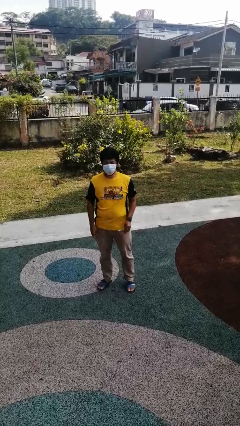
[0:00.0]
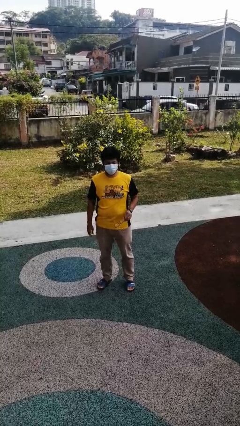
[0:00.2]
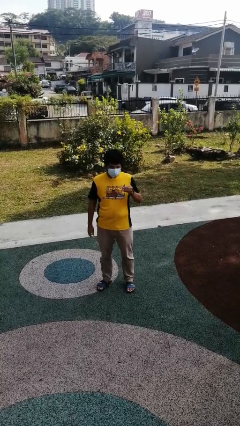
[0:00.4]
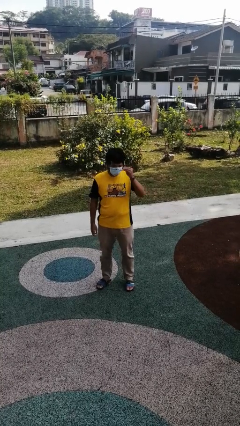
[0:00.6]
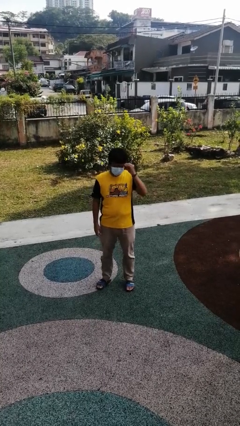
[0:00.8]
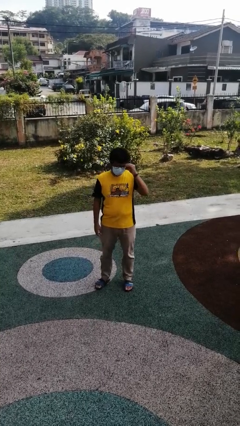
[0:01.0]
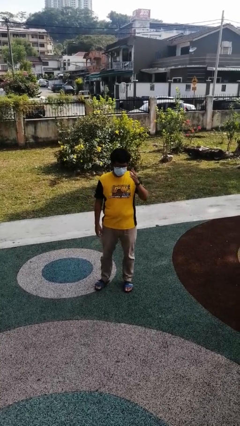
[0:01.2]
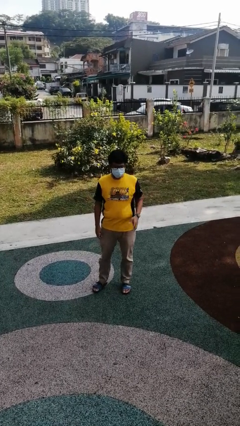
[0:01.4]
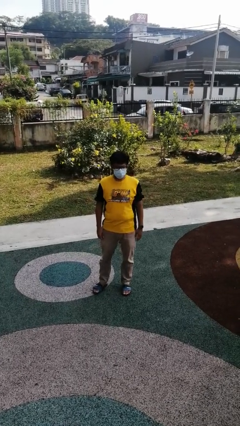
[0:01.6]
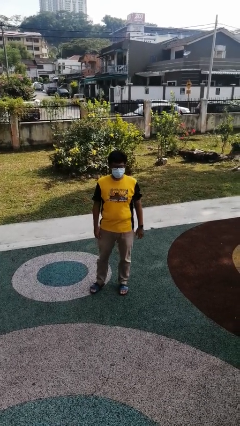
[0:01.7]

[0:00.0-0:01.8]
person puts on glasses

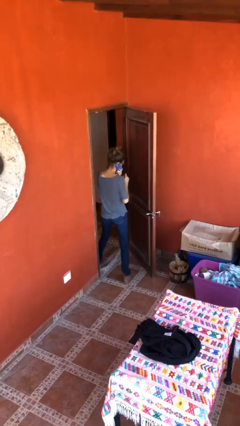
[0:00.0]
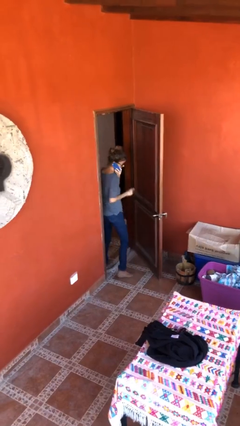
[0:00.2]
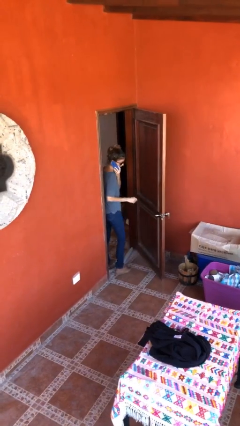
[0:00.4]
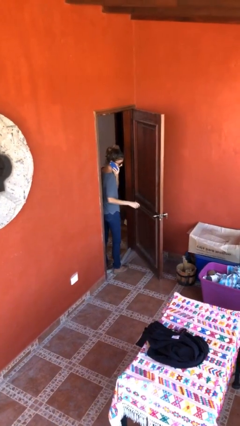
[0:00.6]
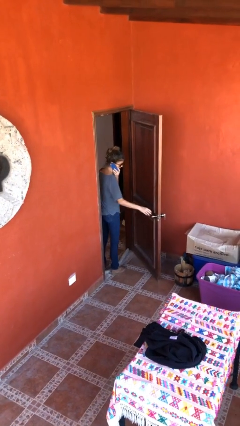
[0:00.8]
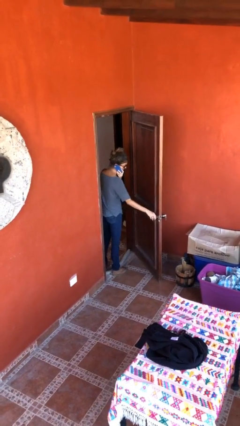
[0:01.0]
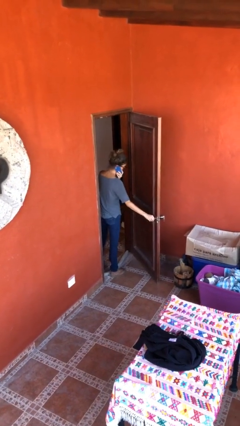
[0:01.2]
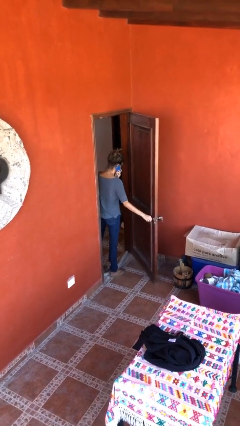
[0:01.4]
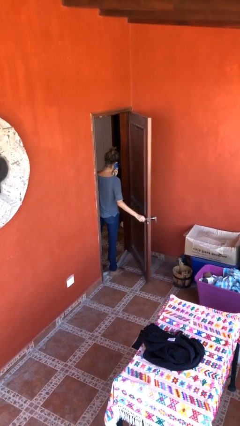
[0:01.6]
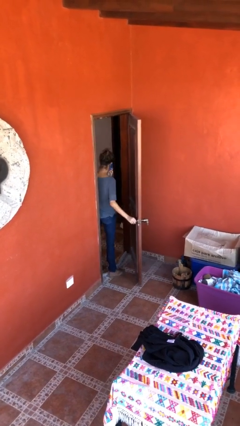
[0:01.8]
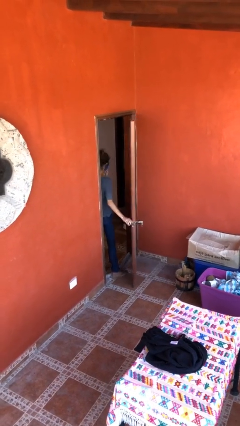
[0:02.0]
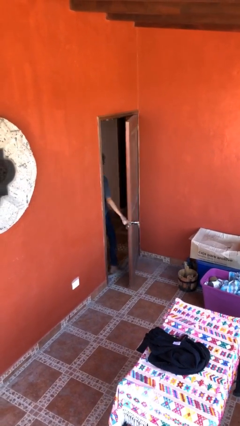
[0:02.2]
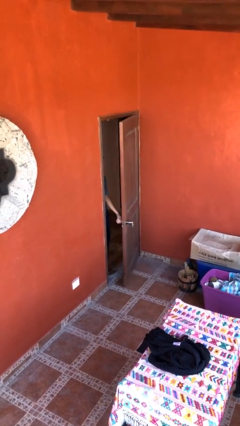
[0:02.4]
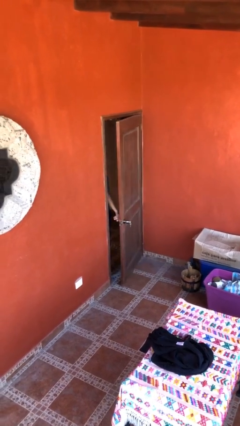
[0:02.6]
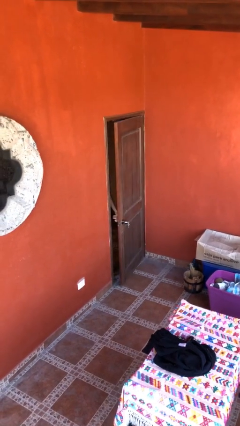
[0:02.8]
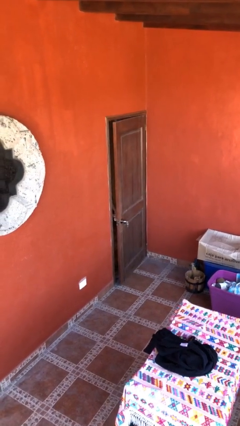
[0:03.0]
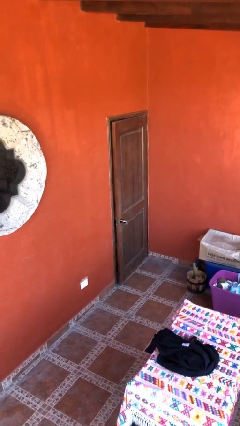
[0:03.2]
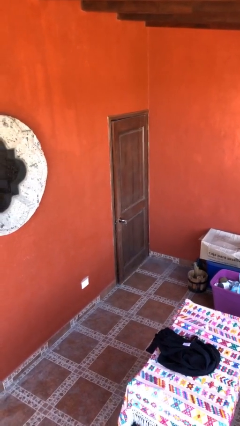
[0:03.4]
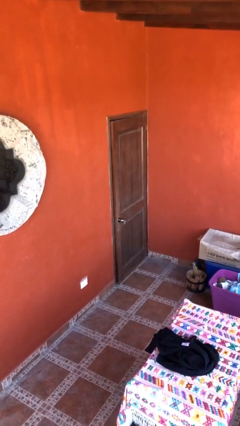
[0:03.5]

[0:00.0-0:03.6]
person closes facility door

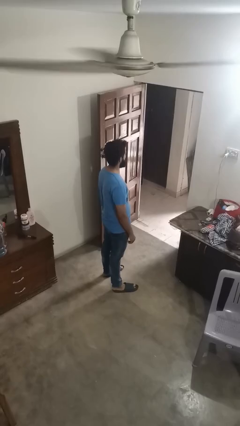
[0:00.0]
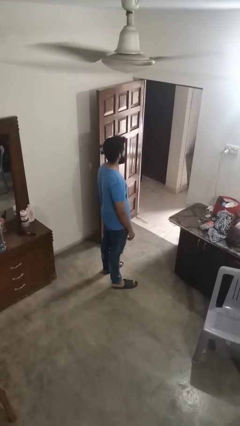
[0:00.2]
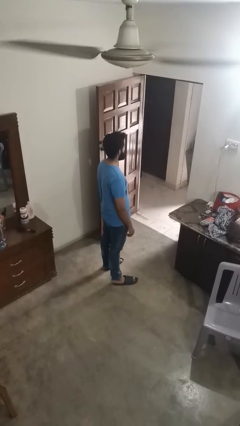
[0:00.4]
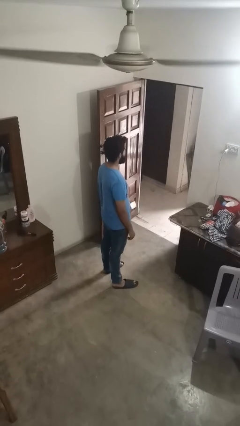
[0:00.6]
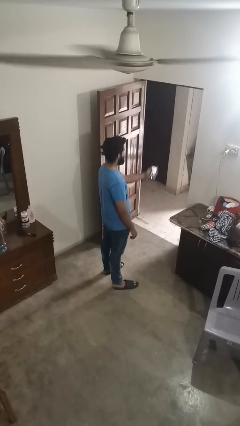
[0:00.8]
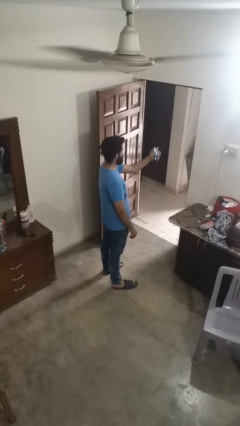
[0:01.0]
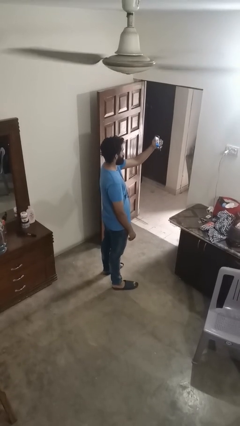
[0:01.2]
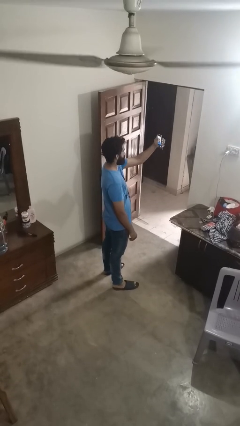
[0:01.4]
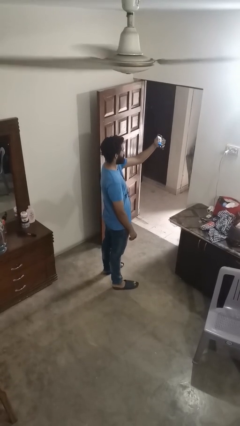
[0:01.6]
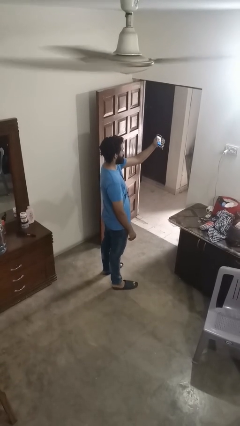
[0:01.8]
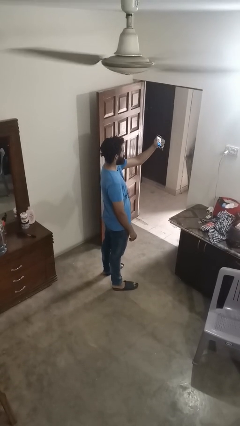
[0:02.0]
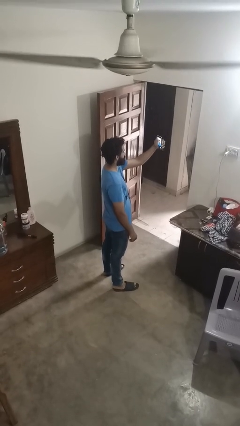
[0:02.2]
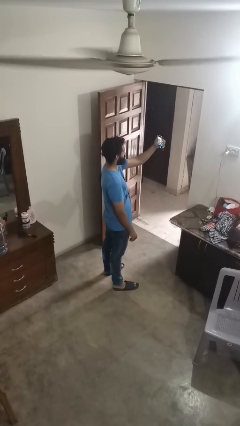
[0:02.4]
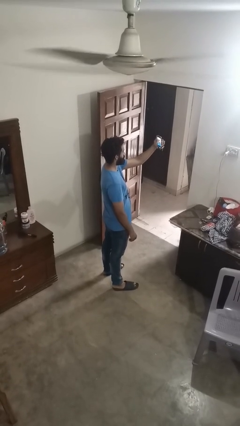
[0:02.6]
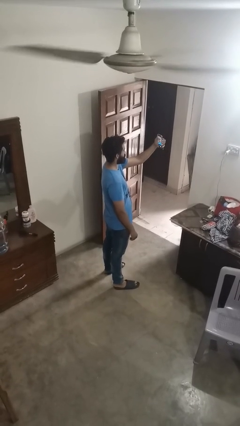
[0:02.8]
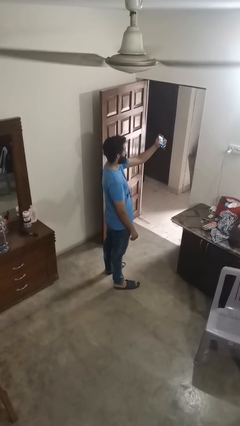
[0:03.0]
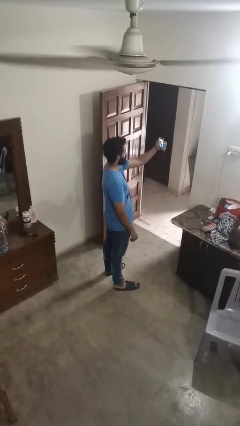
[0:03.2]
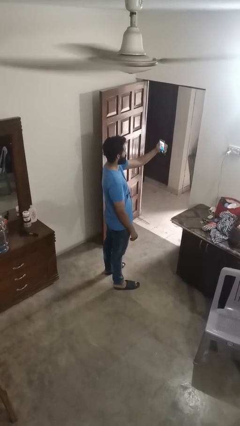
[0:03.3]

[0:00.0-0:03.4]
person takes selfie

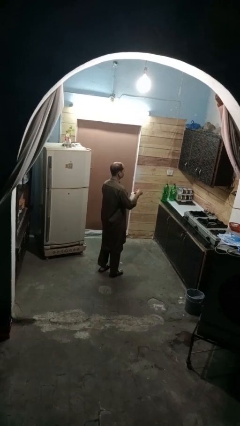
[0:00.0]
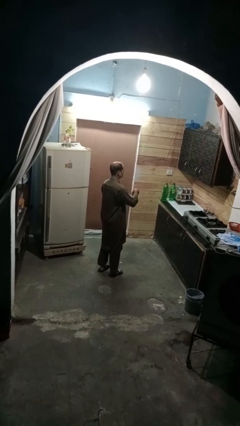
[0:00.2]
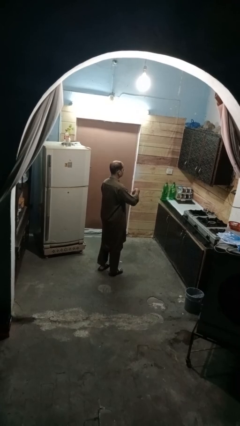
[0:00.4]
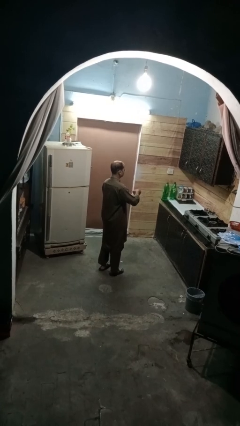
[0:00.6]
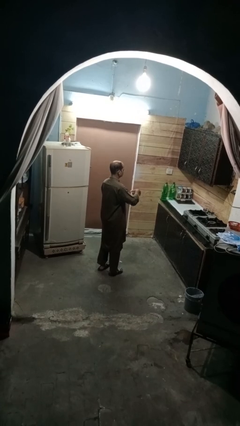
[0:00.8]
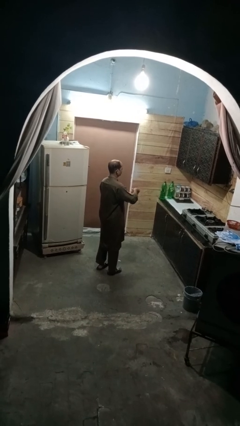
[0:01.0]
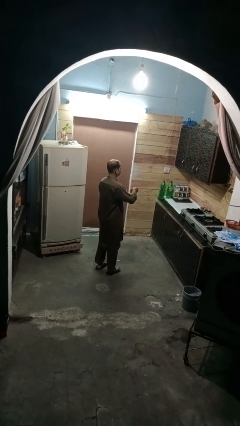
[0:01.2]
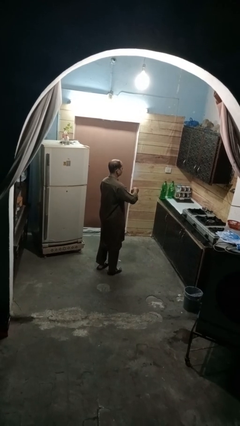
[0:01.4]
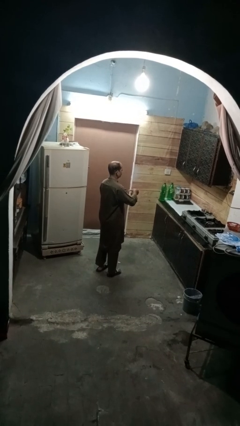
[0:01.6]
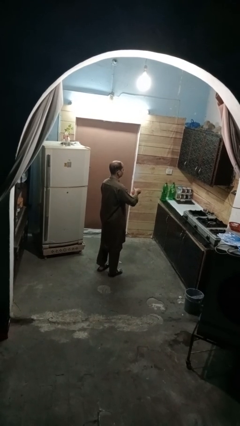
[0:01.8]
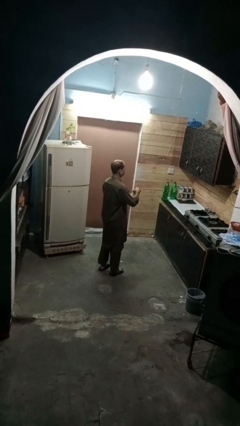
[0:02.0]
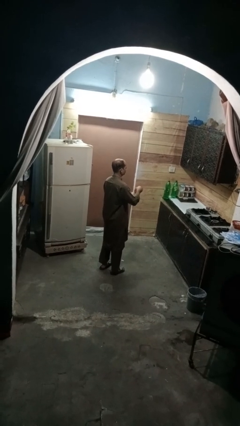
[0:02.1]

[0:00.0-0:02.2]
person closes jar

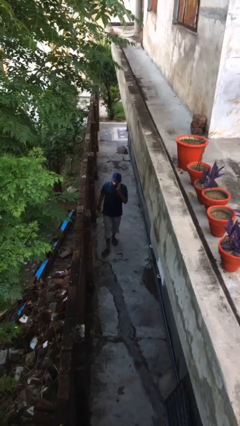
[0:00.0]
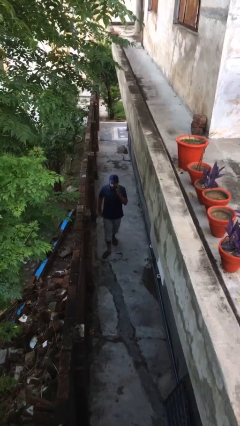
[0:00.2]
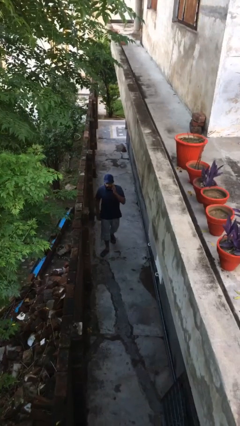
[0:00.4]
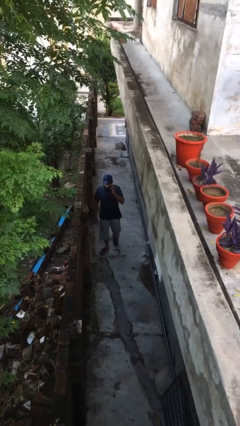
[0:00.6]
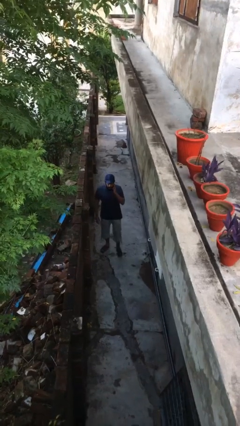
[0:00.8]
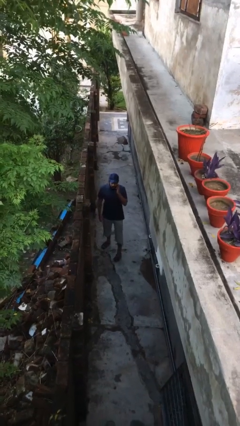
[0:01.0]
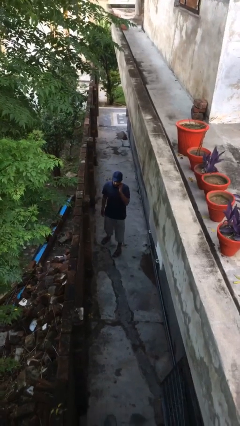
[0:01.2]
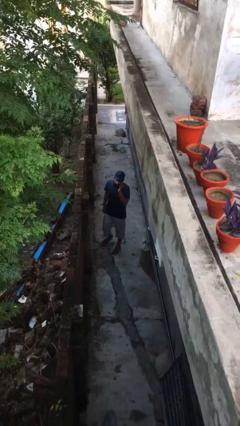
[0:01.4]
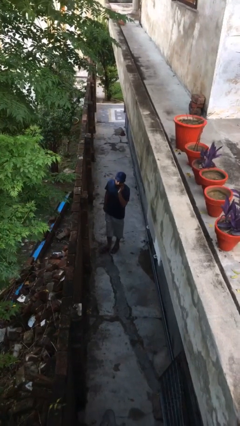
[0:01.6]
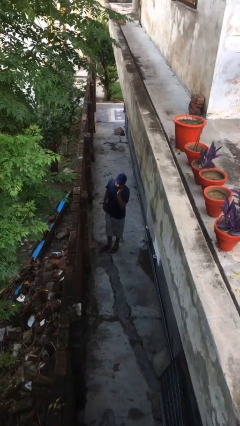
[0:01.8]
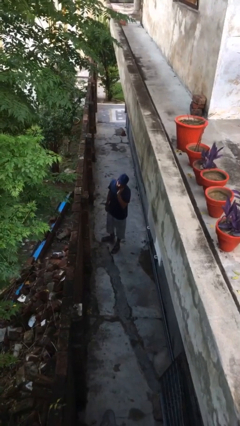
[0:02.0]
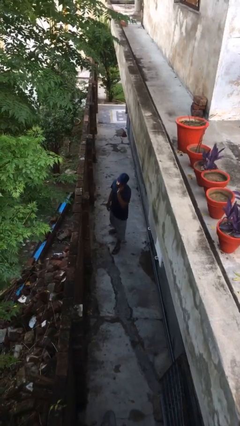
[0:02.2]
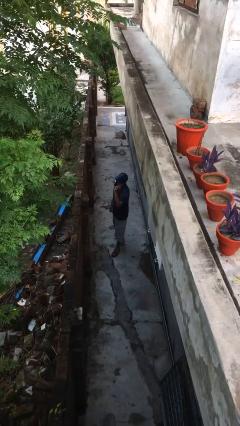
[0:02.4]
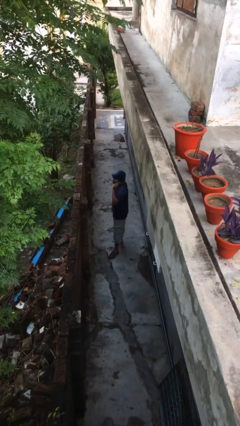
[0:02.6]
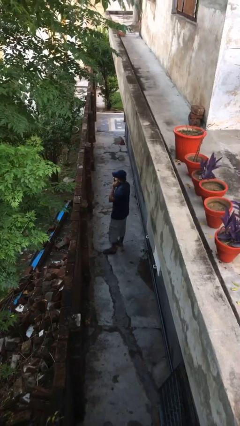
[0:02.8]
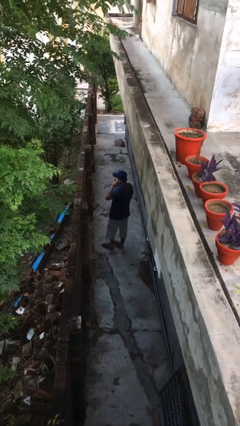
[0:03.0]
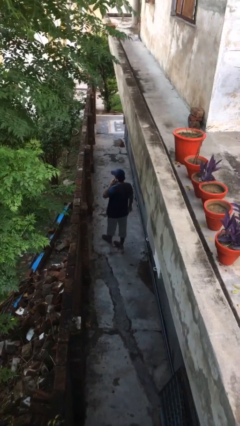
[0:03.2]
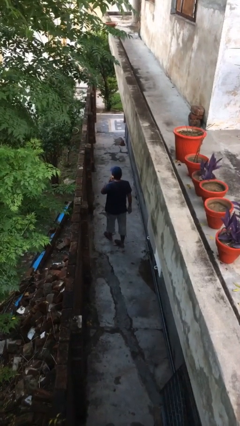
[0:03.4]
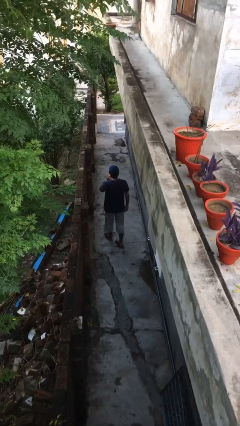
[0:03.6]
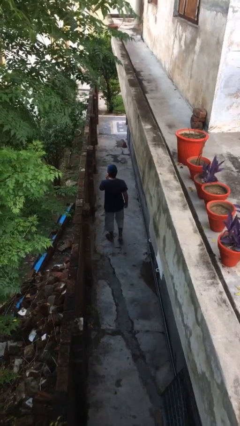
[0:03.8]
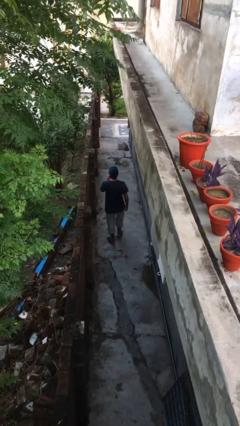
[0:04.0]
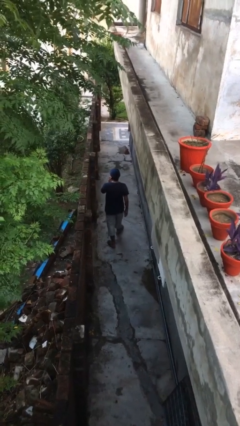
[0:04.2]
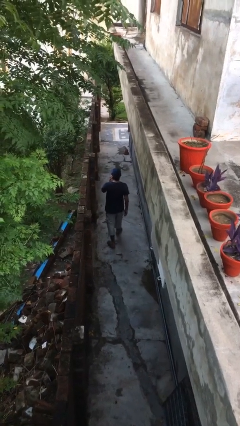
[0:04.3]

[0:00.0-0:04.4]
person talks on phone

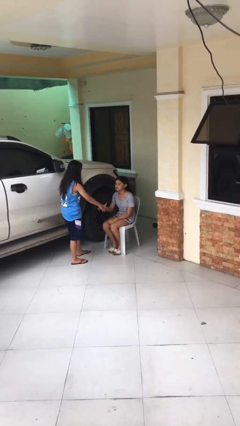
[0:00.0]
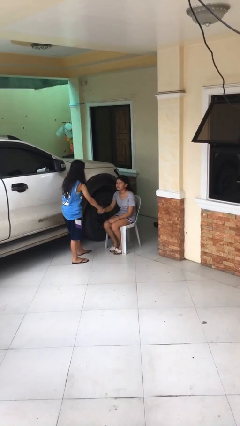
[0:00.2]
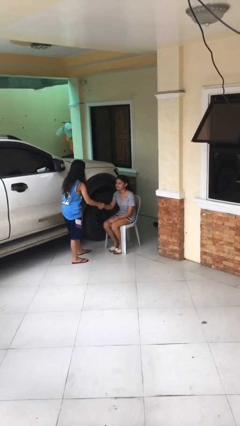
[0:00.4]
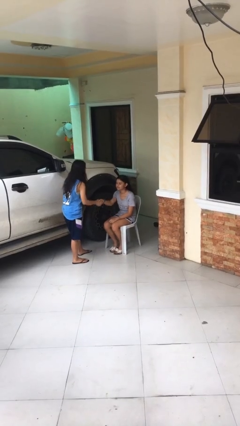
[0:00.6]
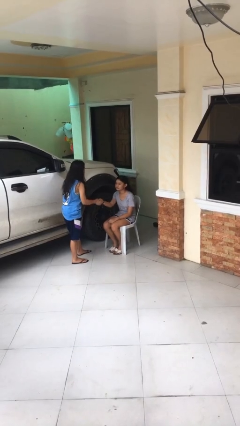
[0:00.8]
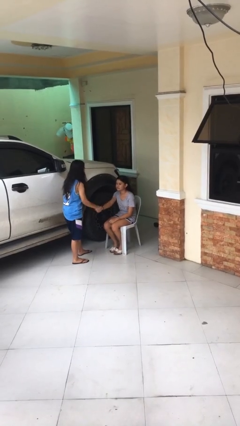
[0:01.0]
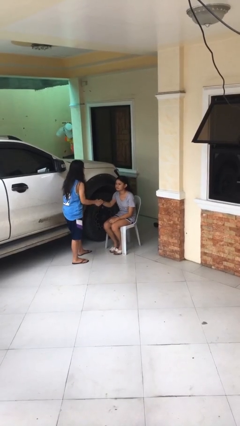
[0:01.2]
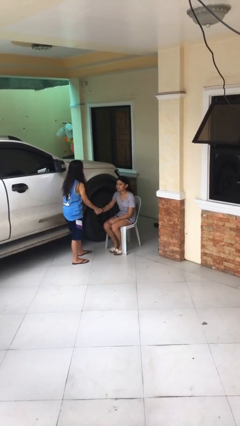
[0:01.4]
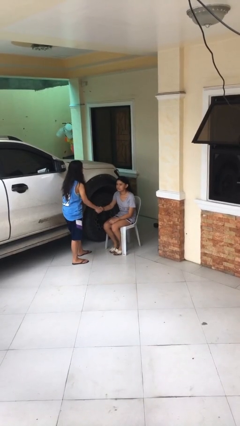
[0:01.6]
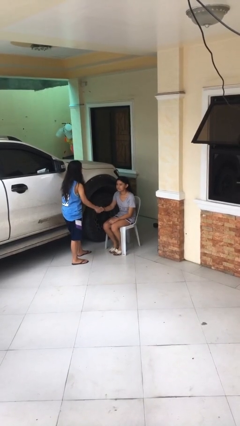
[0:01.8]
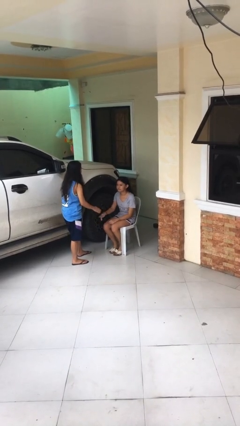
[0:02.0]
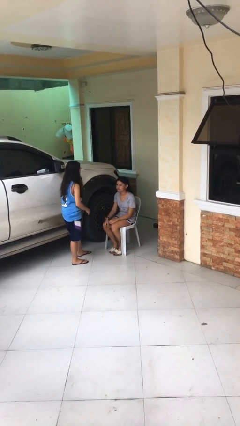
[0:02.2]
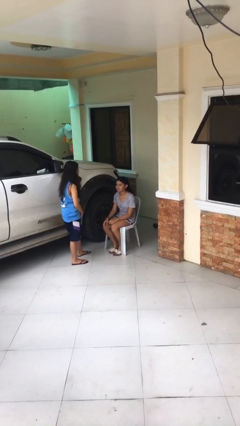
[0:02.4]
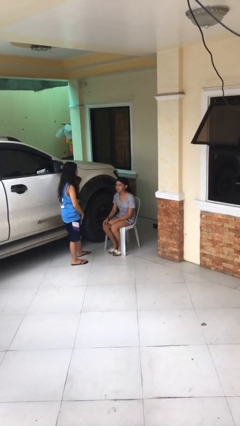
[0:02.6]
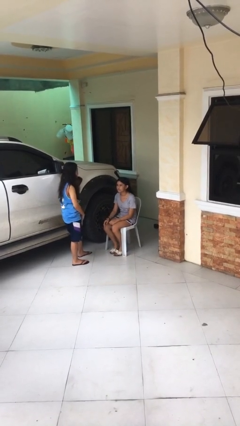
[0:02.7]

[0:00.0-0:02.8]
person shakes hand
